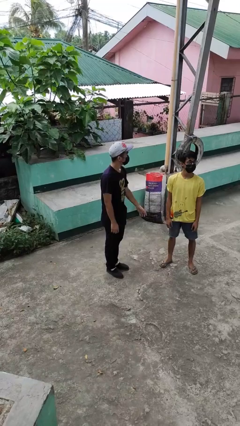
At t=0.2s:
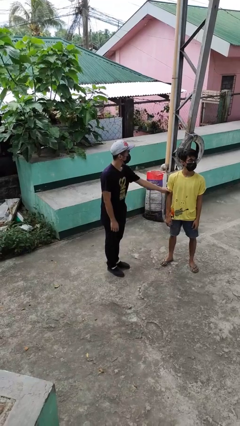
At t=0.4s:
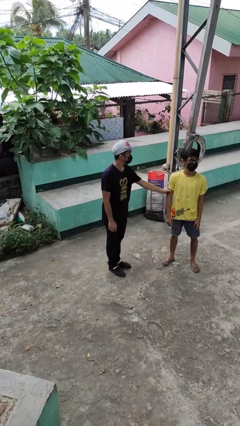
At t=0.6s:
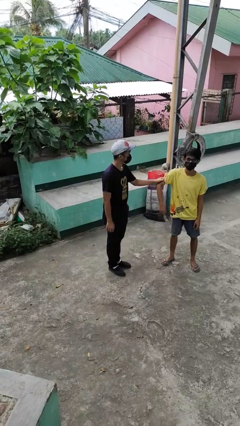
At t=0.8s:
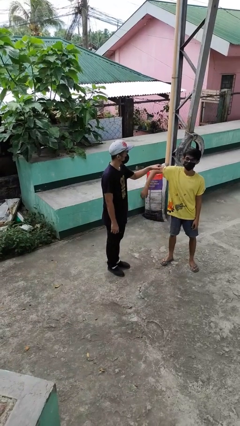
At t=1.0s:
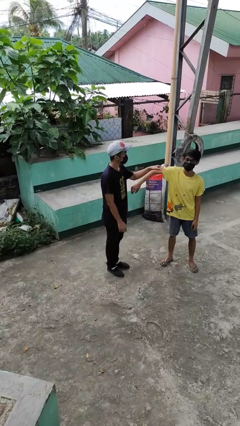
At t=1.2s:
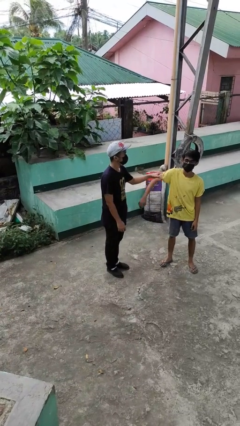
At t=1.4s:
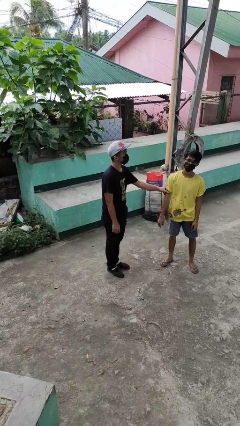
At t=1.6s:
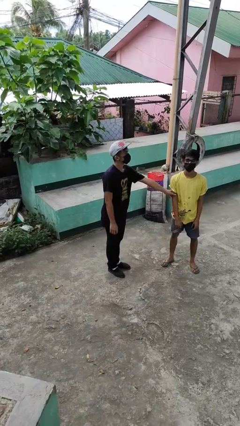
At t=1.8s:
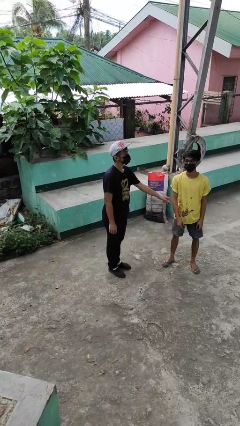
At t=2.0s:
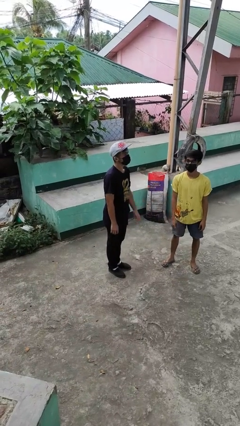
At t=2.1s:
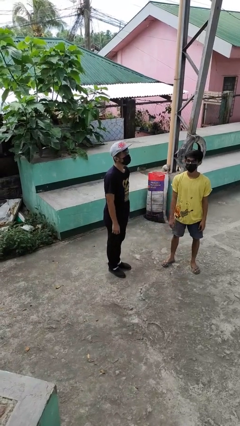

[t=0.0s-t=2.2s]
person grabs person by bicep

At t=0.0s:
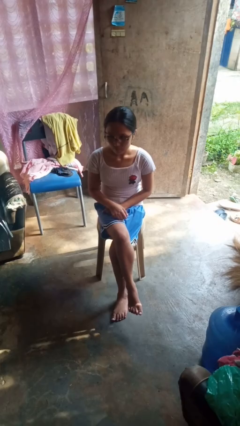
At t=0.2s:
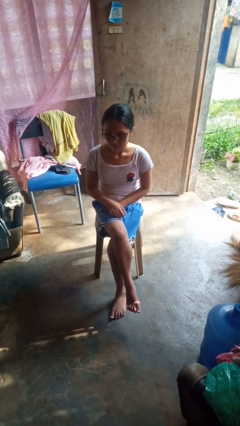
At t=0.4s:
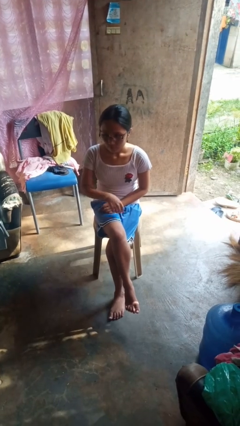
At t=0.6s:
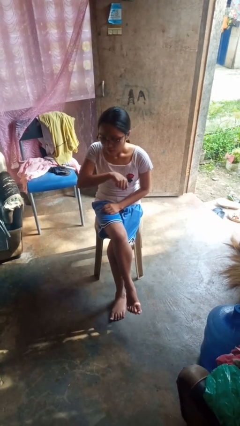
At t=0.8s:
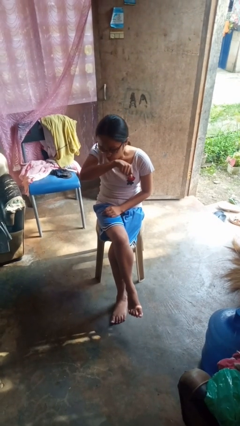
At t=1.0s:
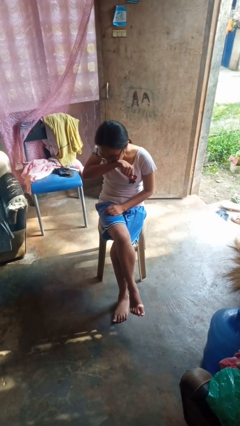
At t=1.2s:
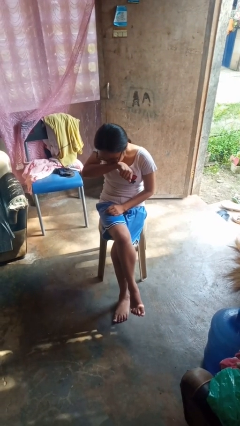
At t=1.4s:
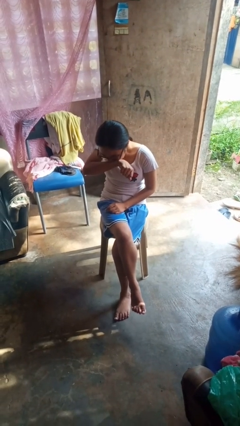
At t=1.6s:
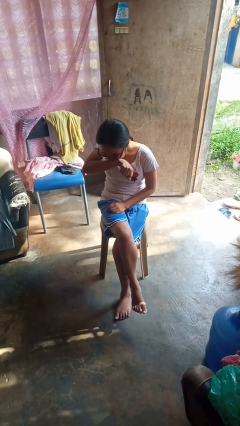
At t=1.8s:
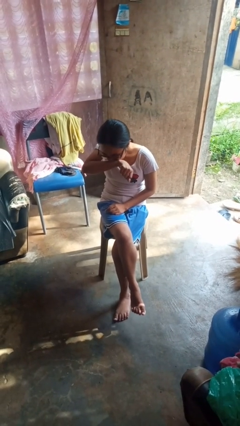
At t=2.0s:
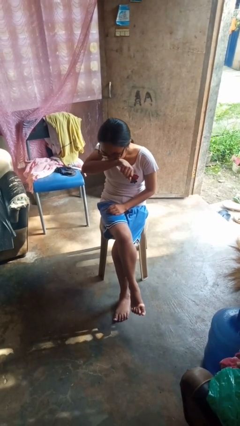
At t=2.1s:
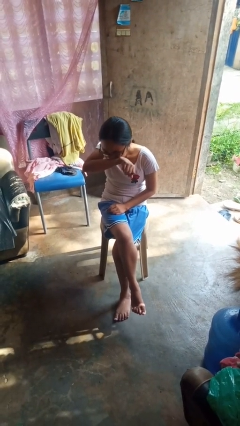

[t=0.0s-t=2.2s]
person sneezes into arm

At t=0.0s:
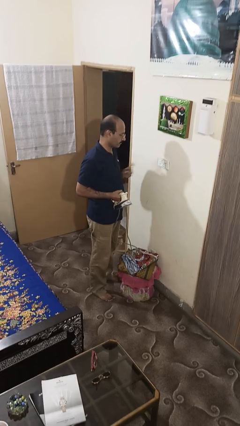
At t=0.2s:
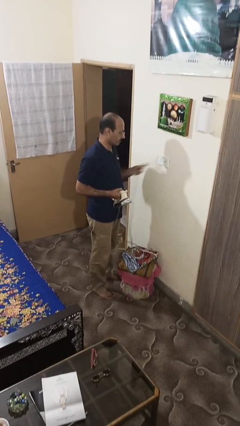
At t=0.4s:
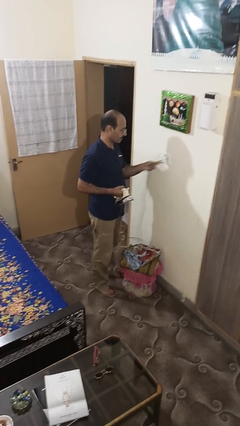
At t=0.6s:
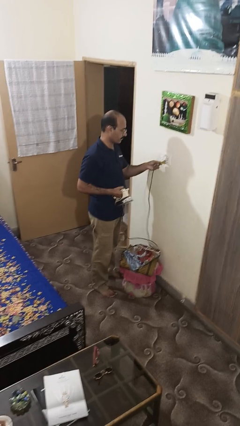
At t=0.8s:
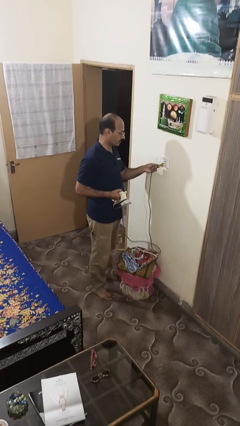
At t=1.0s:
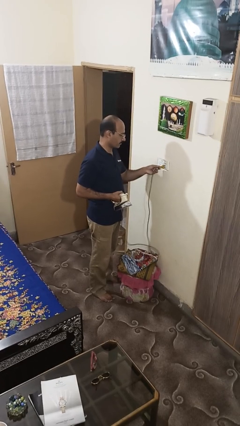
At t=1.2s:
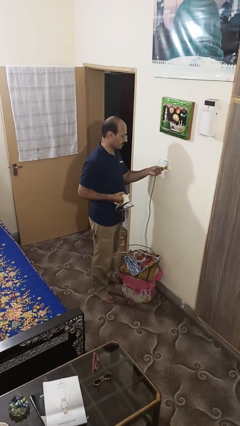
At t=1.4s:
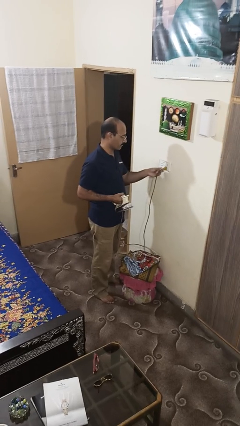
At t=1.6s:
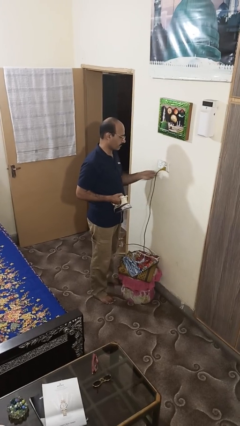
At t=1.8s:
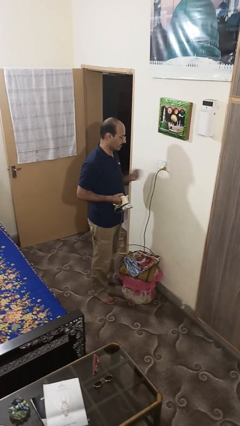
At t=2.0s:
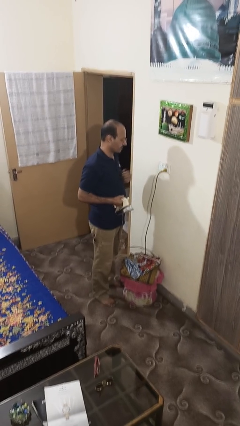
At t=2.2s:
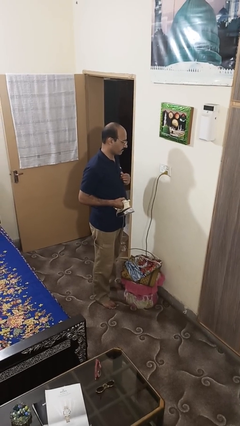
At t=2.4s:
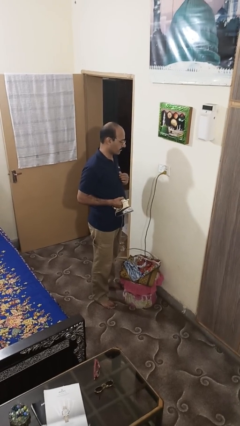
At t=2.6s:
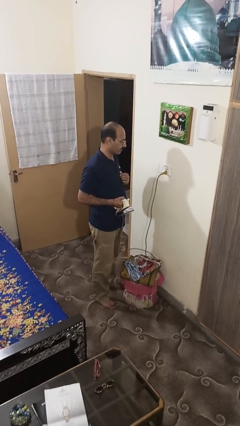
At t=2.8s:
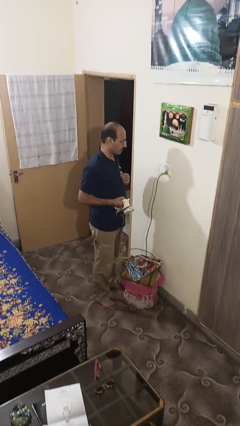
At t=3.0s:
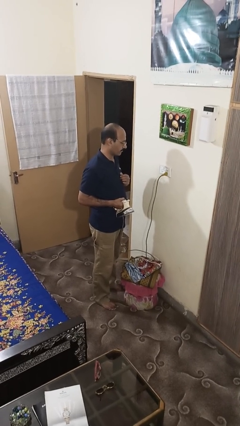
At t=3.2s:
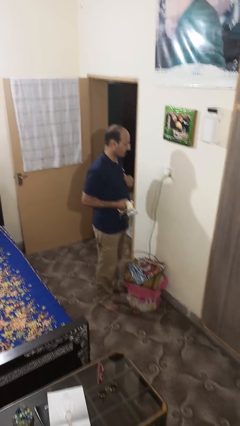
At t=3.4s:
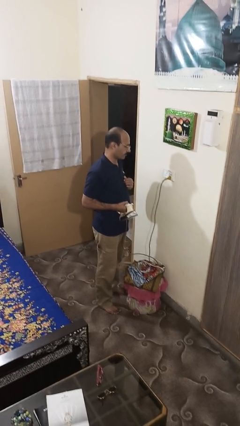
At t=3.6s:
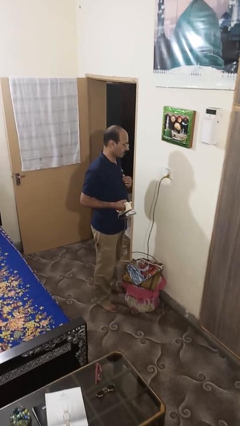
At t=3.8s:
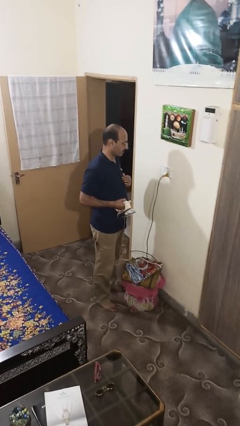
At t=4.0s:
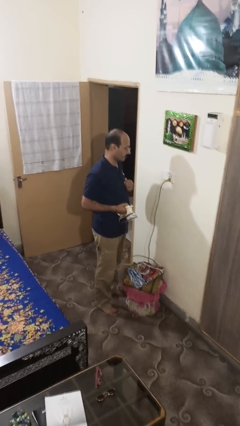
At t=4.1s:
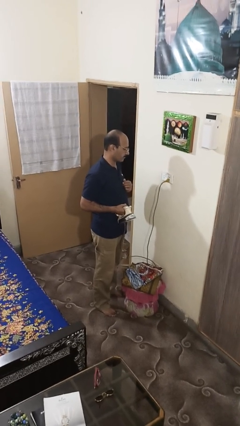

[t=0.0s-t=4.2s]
person plugs into electrical socket

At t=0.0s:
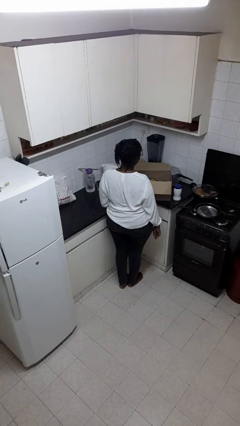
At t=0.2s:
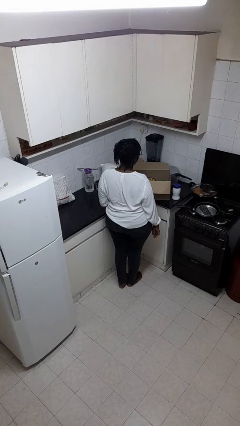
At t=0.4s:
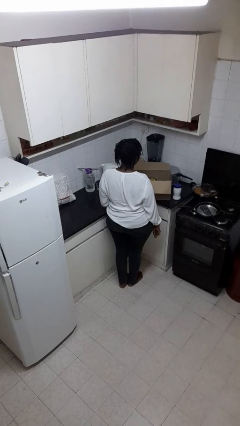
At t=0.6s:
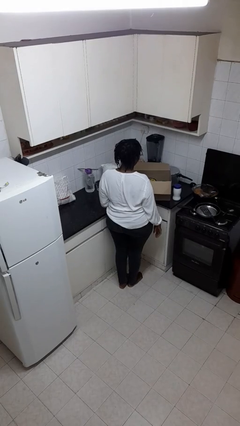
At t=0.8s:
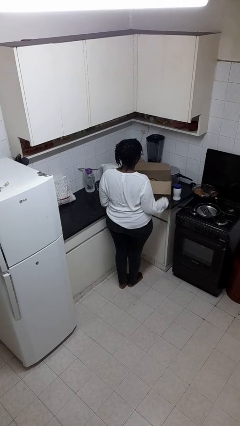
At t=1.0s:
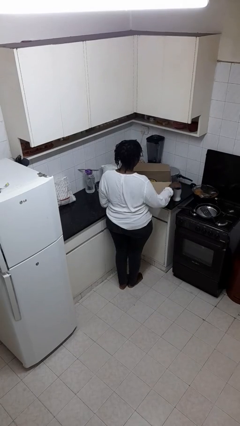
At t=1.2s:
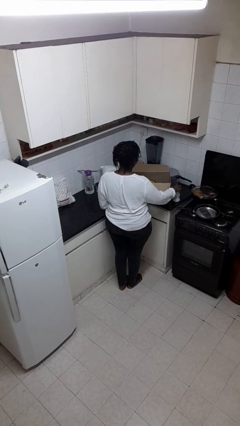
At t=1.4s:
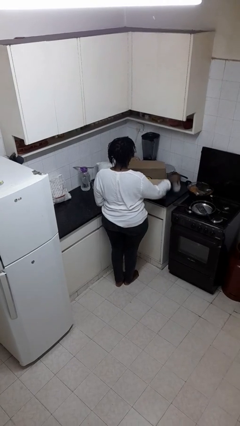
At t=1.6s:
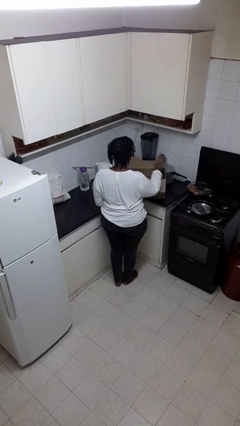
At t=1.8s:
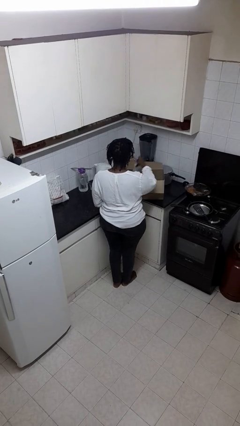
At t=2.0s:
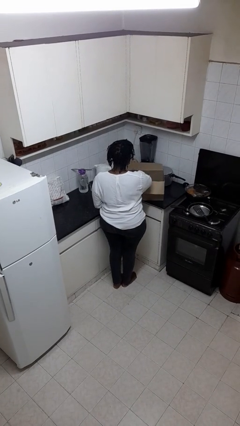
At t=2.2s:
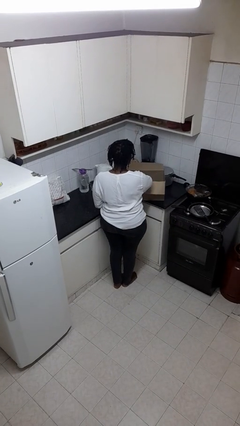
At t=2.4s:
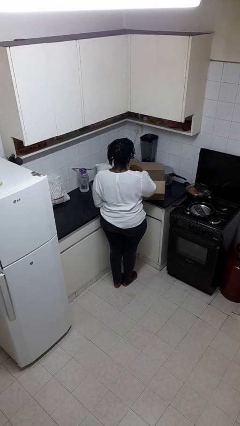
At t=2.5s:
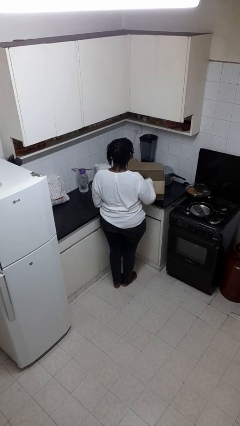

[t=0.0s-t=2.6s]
person puts object into box

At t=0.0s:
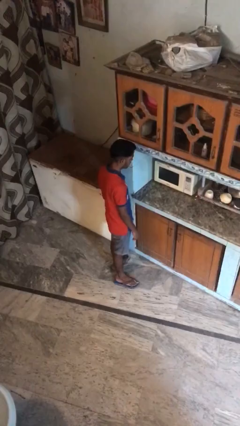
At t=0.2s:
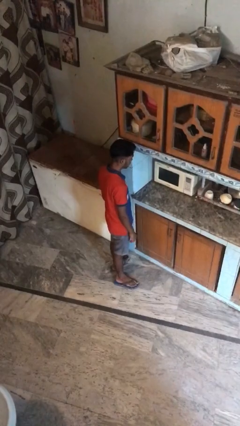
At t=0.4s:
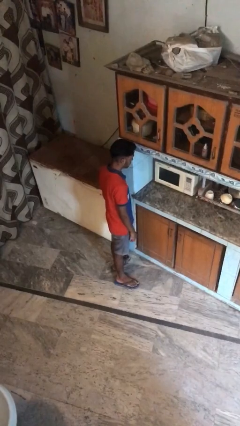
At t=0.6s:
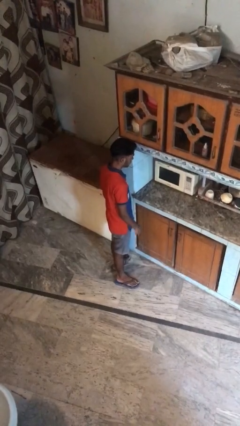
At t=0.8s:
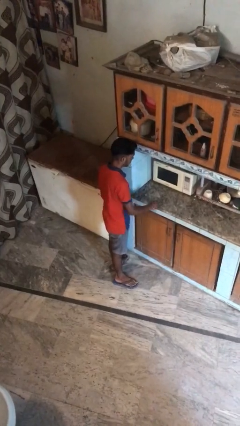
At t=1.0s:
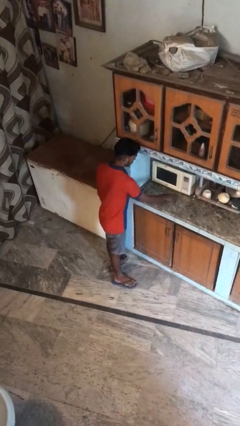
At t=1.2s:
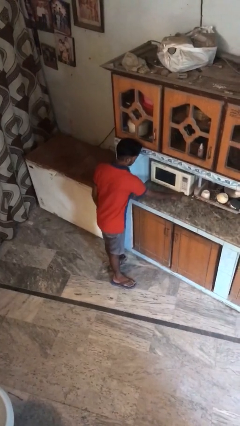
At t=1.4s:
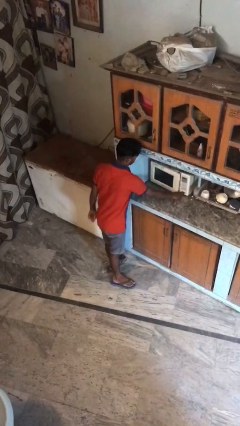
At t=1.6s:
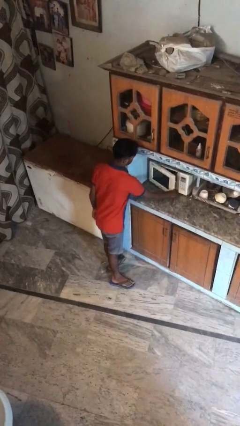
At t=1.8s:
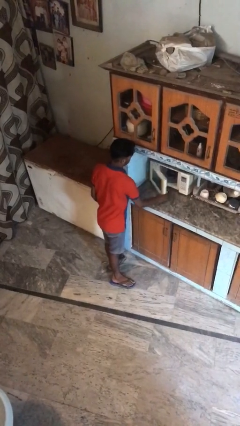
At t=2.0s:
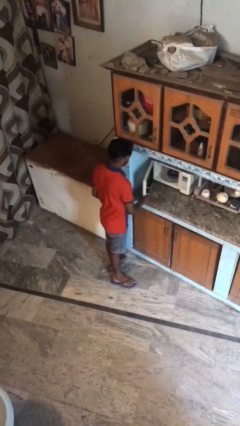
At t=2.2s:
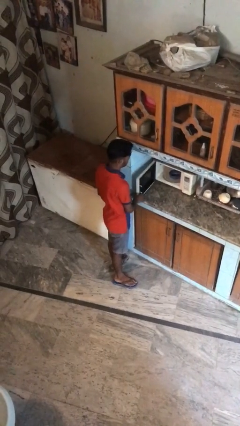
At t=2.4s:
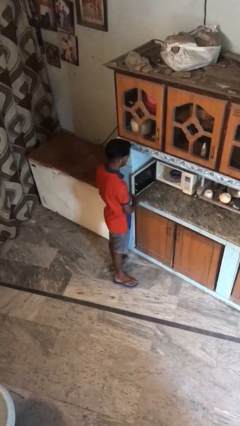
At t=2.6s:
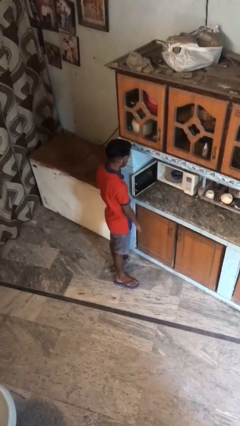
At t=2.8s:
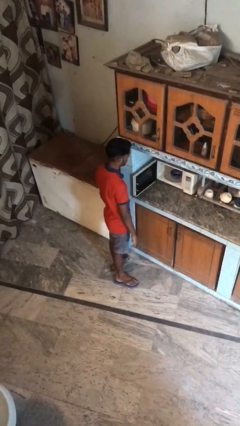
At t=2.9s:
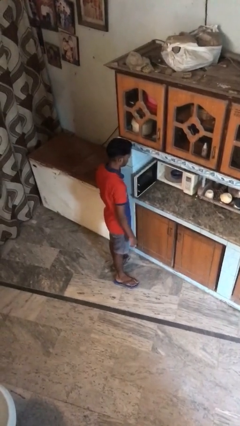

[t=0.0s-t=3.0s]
person opens oven door

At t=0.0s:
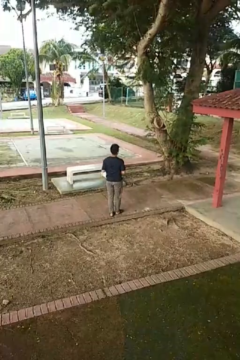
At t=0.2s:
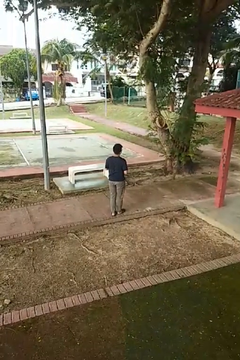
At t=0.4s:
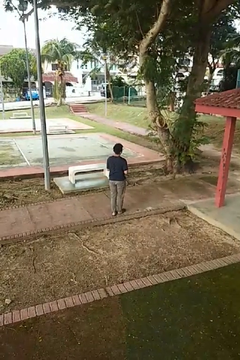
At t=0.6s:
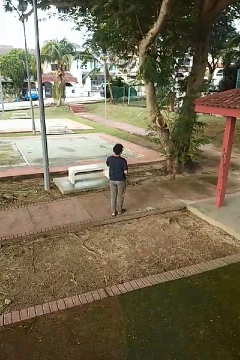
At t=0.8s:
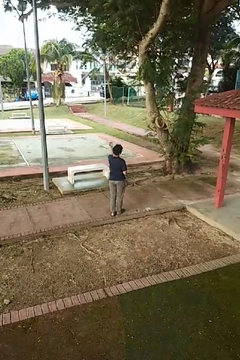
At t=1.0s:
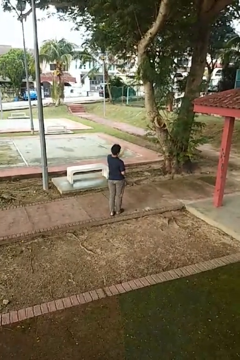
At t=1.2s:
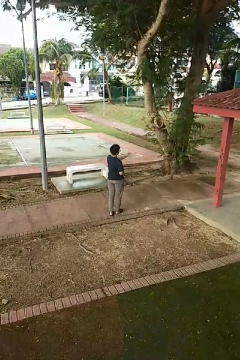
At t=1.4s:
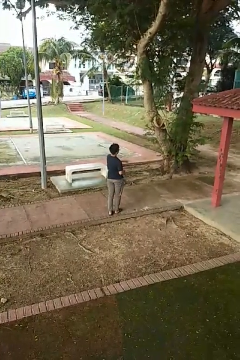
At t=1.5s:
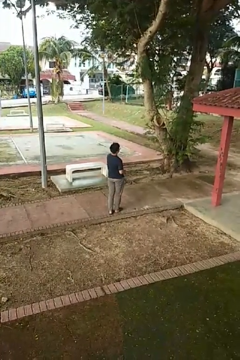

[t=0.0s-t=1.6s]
person karate chop

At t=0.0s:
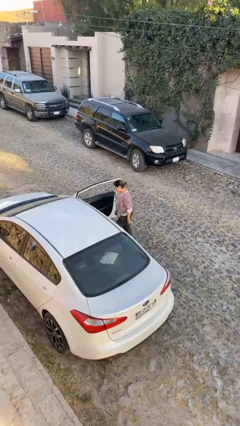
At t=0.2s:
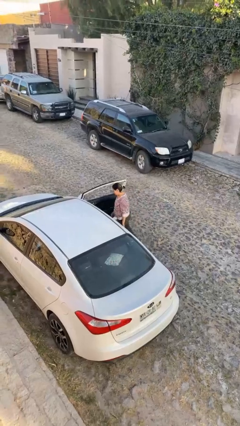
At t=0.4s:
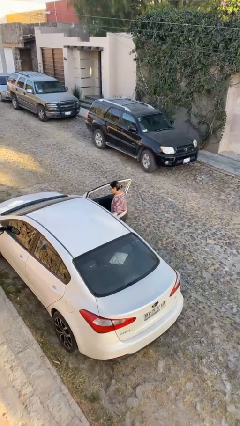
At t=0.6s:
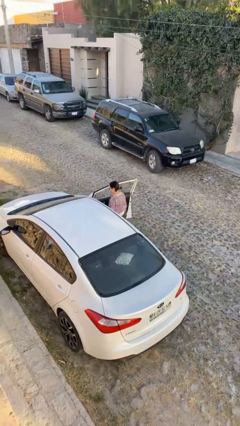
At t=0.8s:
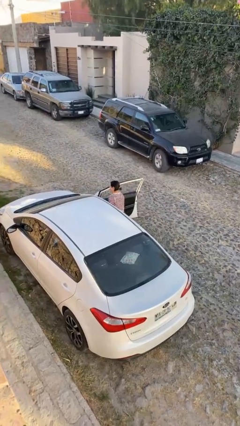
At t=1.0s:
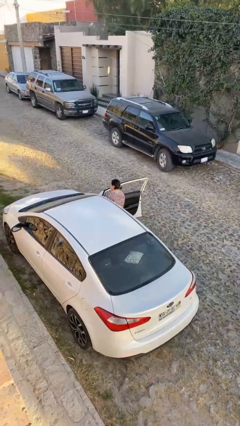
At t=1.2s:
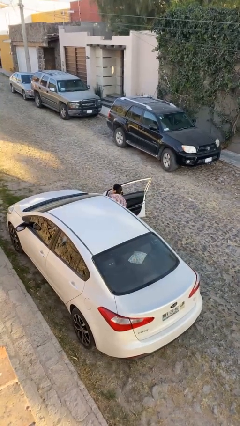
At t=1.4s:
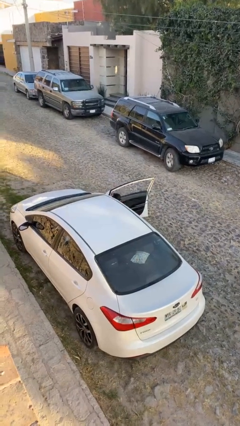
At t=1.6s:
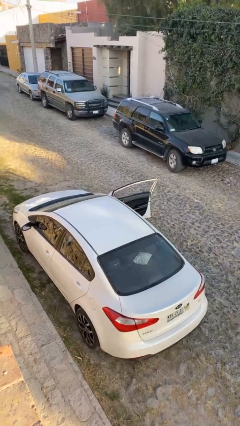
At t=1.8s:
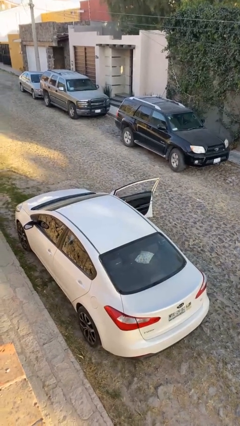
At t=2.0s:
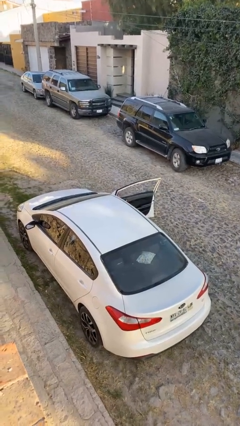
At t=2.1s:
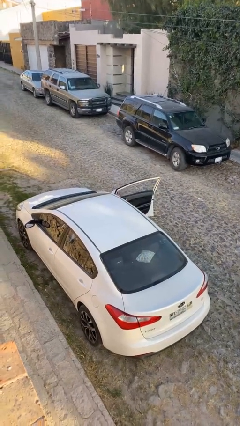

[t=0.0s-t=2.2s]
person enters car
